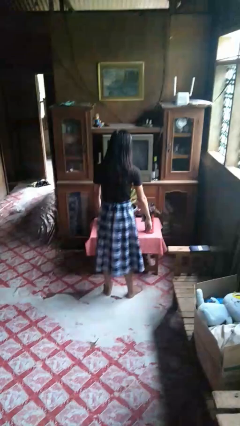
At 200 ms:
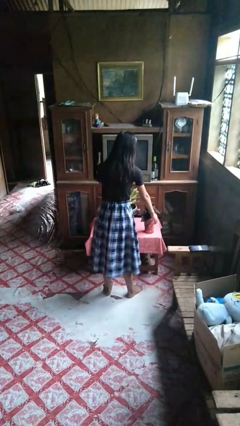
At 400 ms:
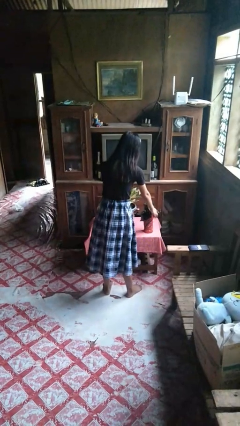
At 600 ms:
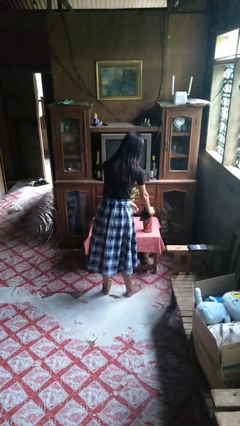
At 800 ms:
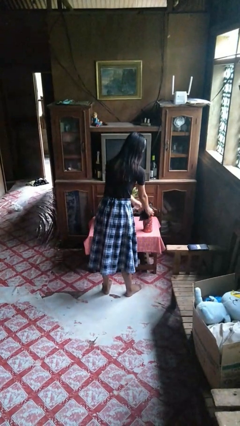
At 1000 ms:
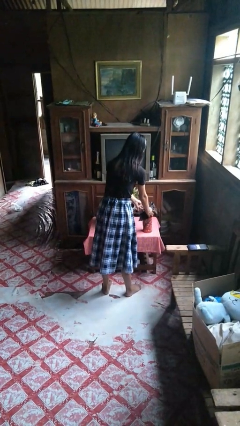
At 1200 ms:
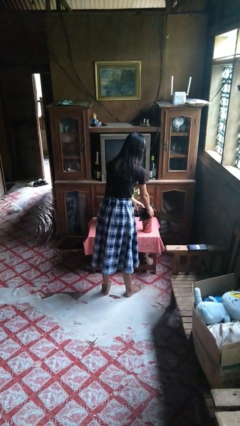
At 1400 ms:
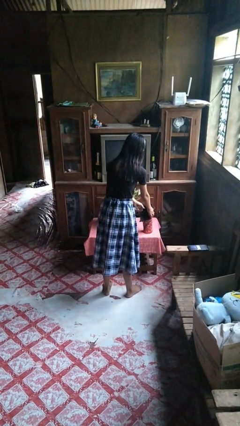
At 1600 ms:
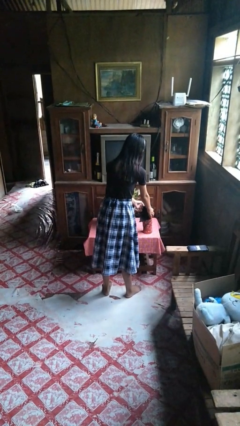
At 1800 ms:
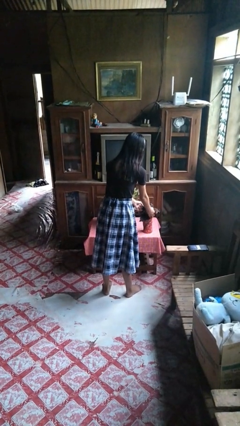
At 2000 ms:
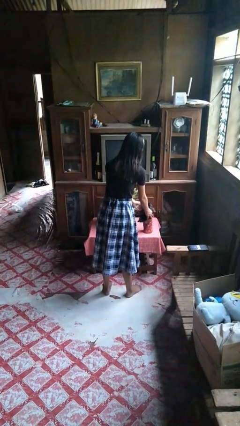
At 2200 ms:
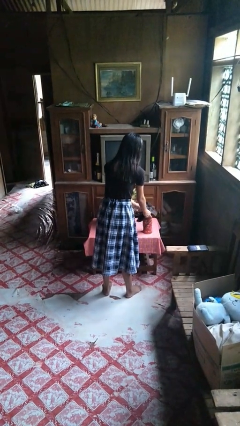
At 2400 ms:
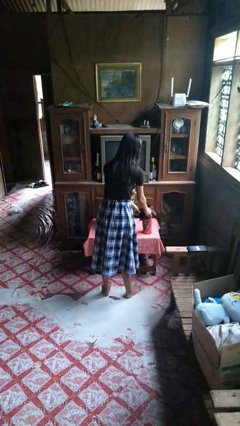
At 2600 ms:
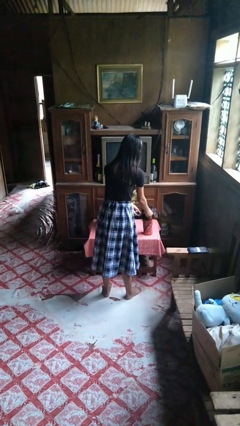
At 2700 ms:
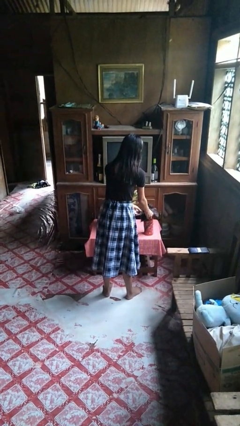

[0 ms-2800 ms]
person arranges flowers in vase

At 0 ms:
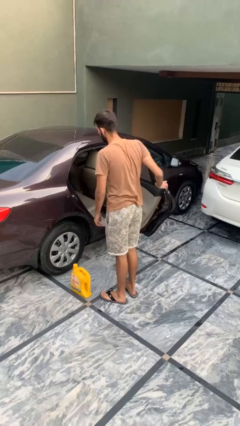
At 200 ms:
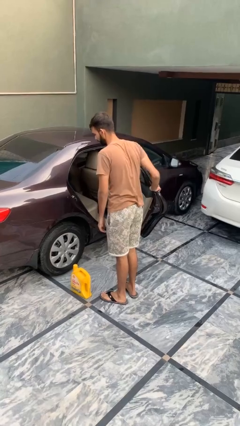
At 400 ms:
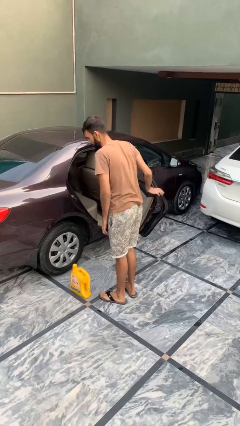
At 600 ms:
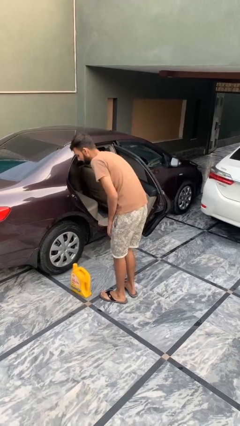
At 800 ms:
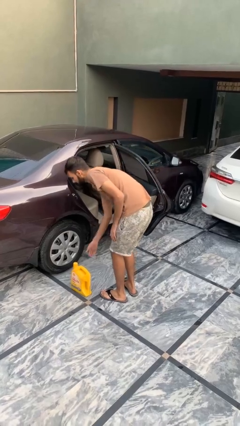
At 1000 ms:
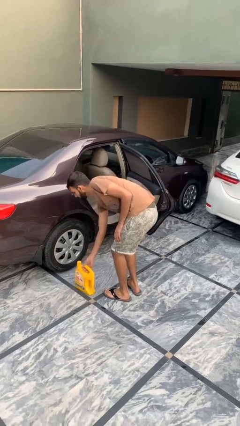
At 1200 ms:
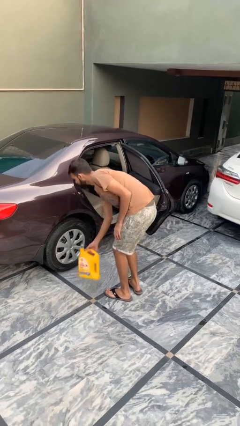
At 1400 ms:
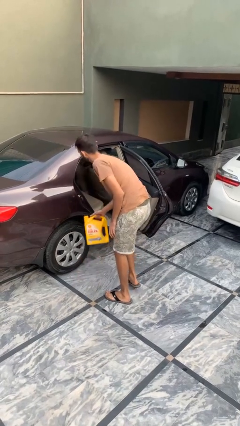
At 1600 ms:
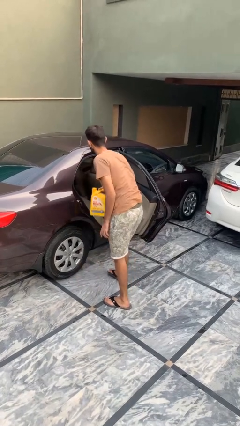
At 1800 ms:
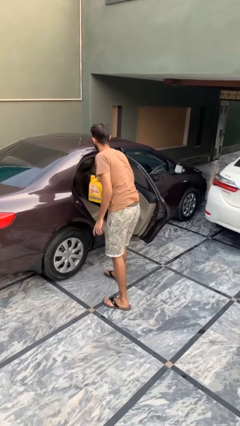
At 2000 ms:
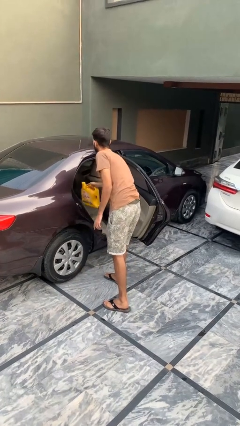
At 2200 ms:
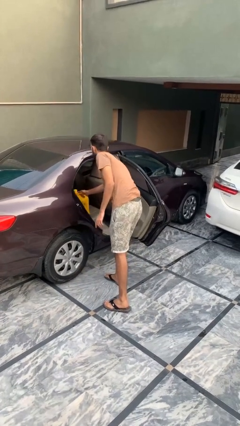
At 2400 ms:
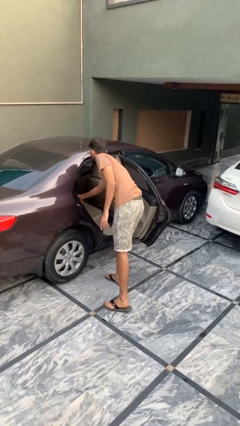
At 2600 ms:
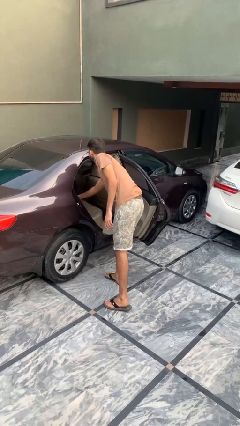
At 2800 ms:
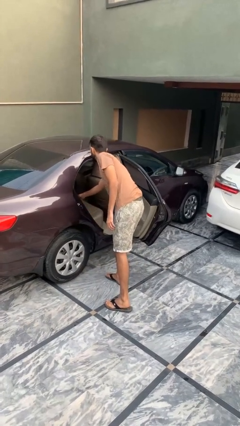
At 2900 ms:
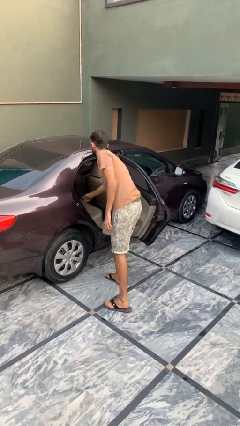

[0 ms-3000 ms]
person loads car

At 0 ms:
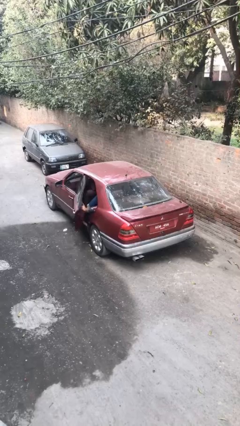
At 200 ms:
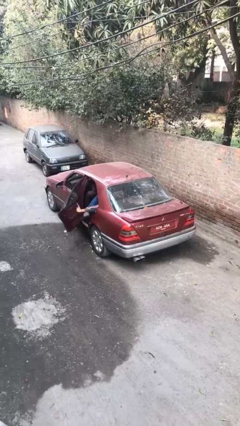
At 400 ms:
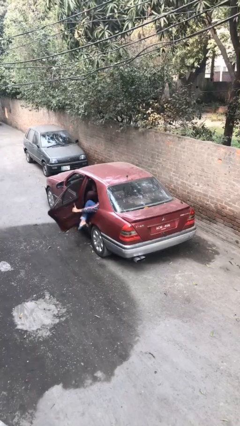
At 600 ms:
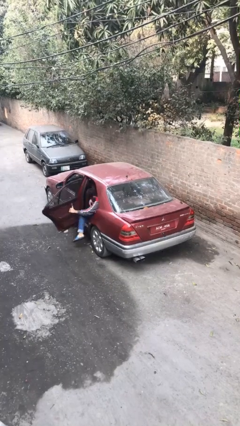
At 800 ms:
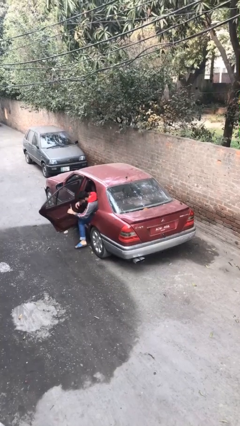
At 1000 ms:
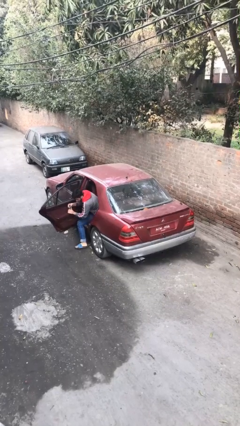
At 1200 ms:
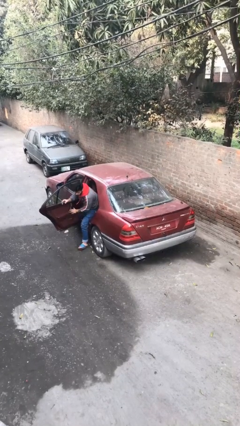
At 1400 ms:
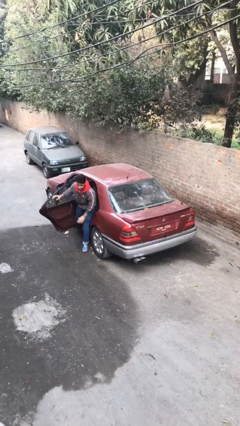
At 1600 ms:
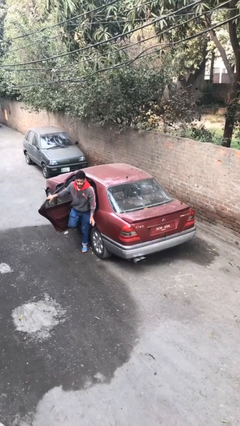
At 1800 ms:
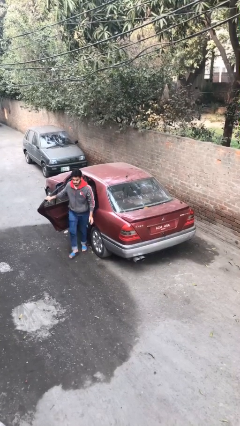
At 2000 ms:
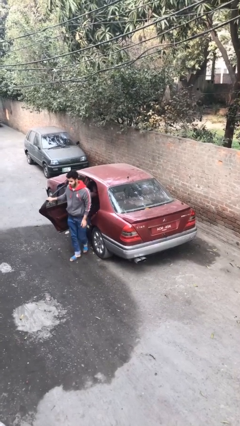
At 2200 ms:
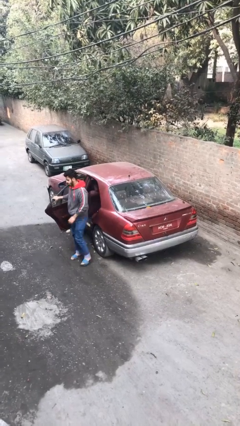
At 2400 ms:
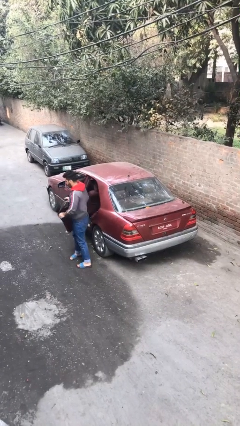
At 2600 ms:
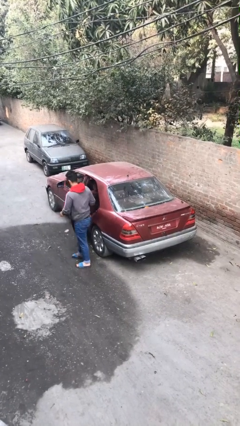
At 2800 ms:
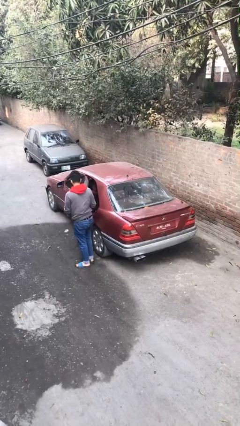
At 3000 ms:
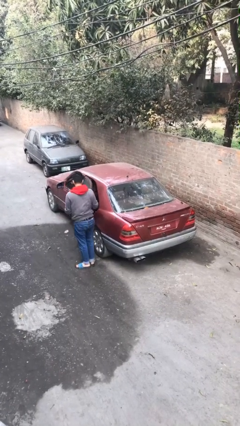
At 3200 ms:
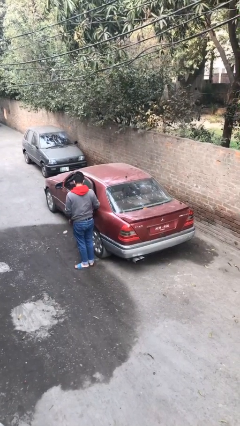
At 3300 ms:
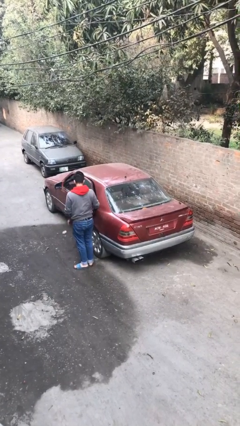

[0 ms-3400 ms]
car drops off person

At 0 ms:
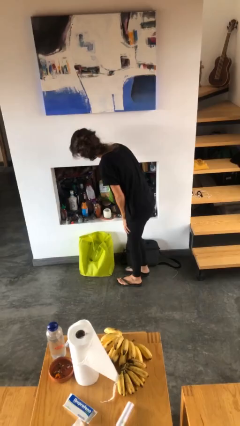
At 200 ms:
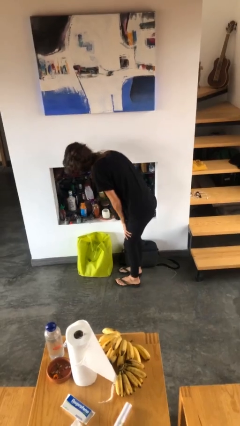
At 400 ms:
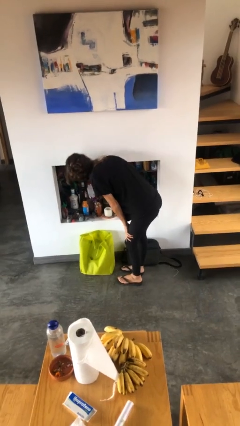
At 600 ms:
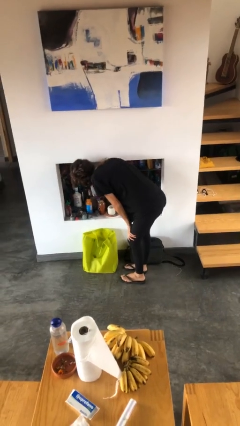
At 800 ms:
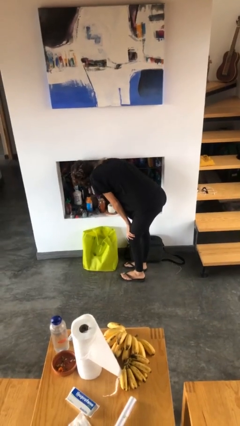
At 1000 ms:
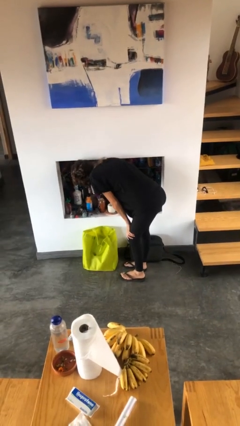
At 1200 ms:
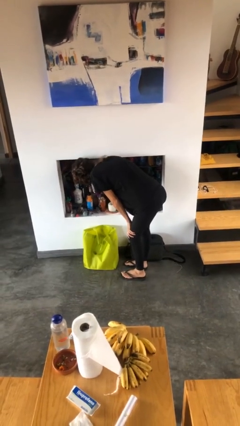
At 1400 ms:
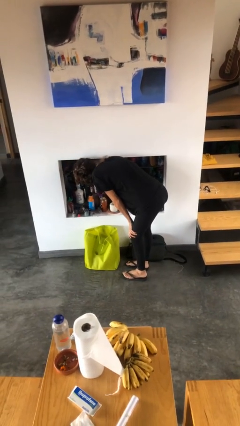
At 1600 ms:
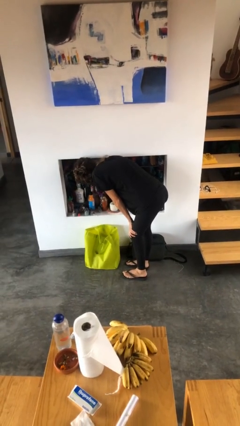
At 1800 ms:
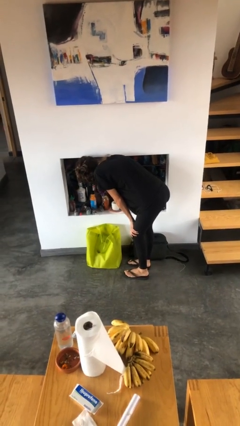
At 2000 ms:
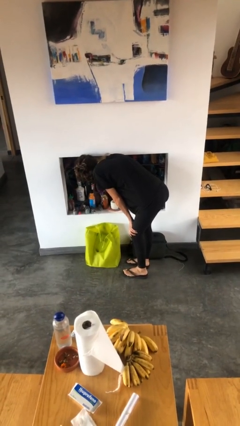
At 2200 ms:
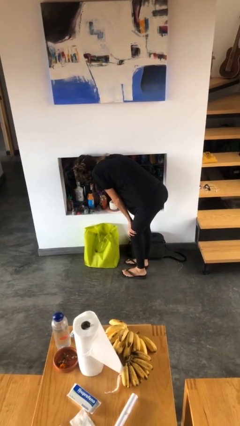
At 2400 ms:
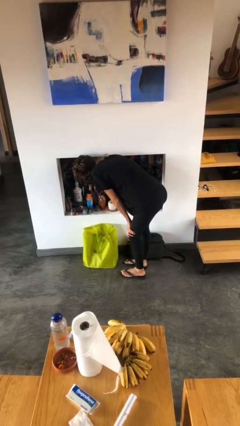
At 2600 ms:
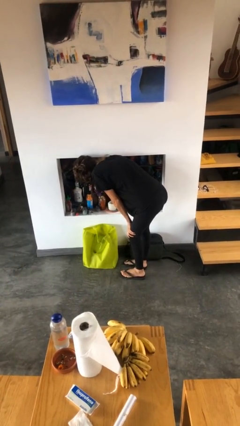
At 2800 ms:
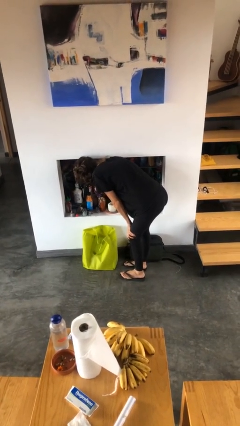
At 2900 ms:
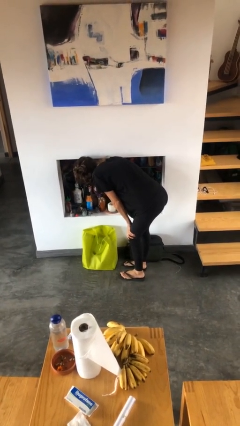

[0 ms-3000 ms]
person searches in cabinet

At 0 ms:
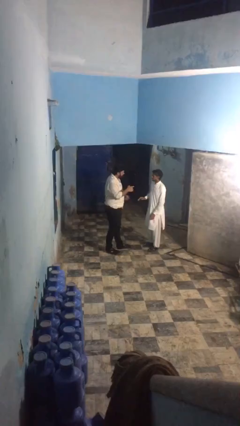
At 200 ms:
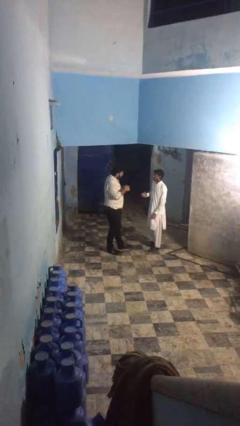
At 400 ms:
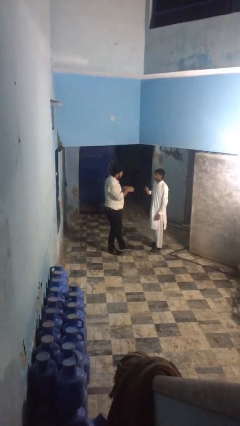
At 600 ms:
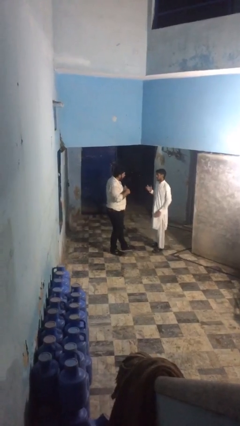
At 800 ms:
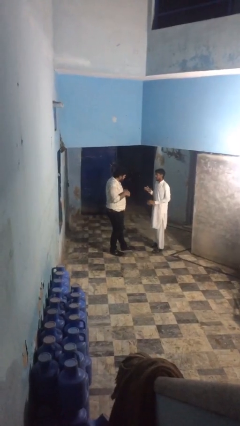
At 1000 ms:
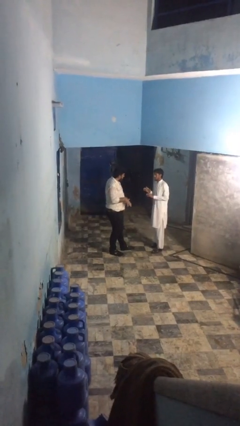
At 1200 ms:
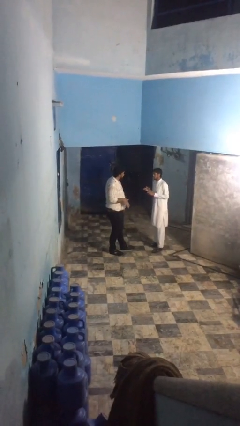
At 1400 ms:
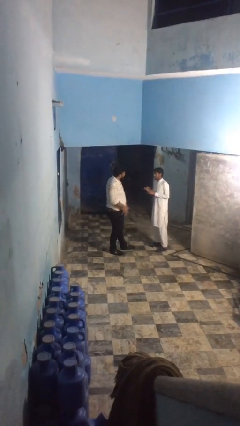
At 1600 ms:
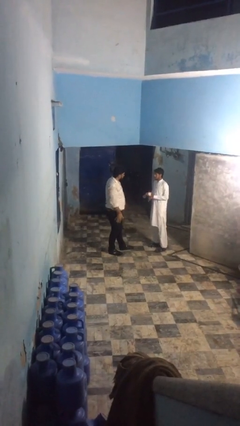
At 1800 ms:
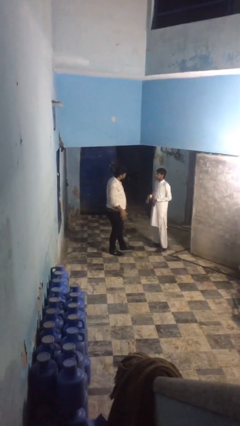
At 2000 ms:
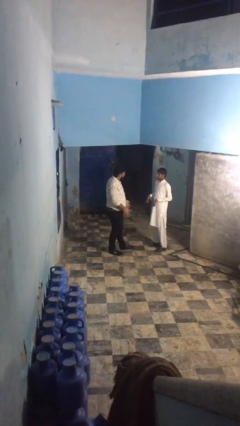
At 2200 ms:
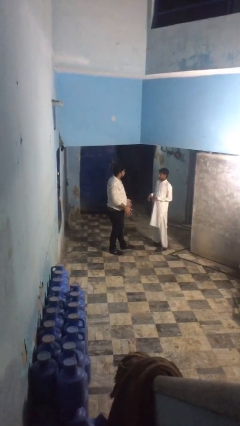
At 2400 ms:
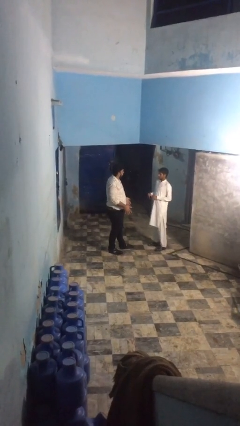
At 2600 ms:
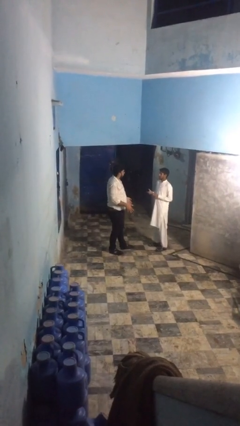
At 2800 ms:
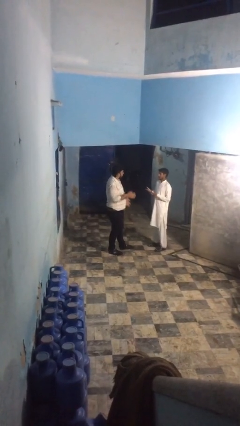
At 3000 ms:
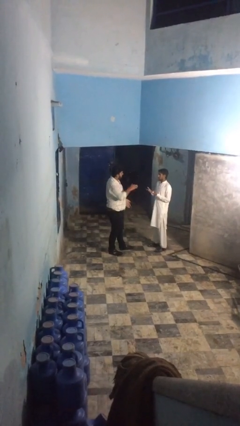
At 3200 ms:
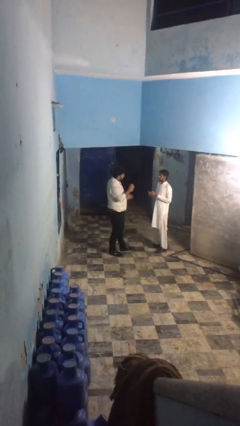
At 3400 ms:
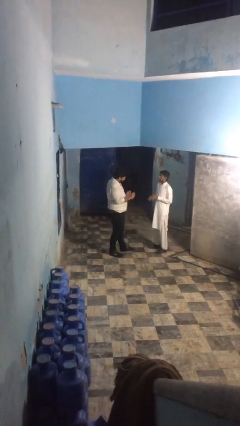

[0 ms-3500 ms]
person talks to person

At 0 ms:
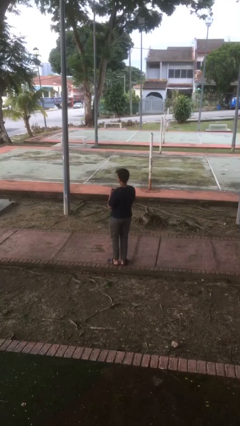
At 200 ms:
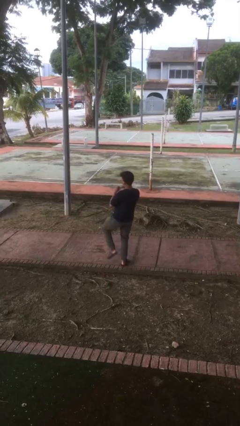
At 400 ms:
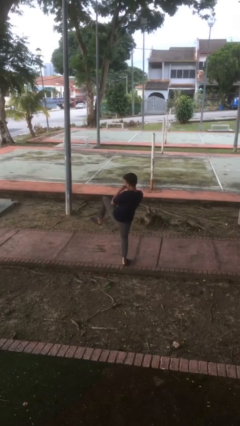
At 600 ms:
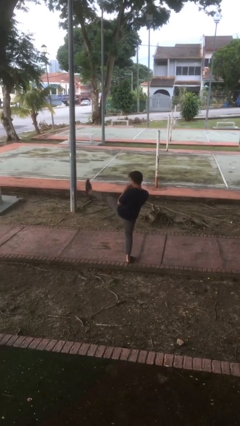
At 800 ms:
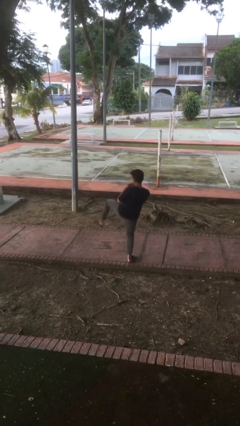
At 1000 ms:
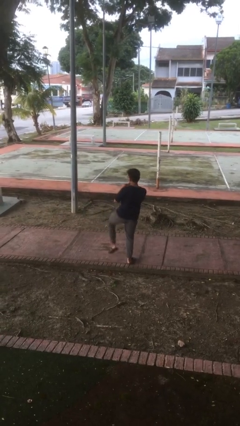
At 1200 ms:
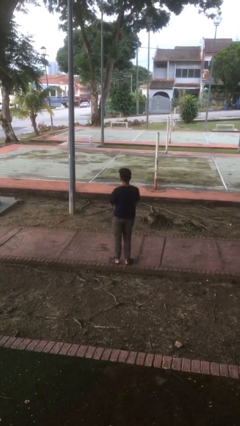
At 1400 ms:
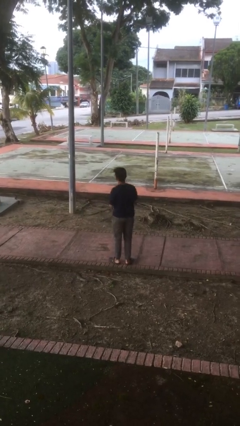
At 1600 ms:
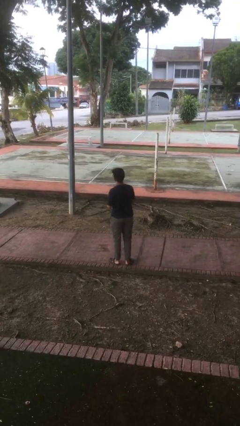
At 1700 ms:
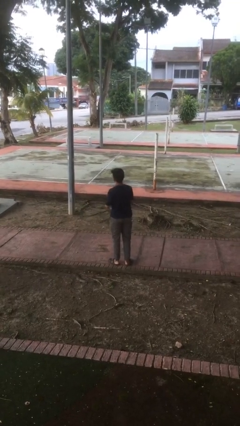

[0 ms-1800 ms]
person karate kicks
